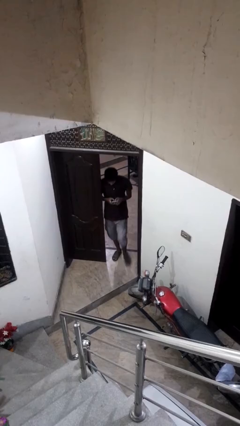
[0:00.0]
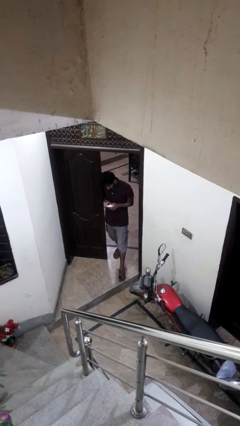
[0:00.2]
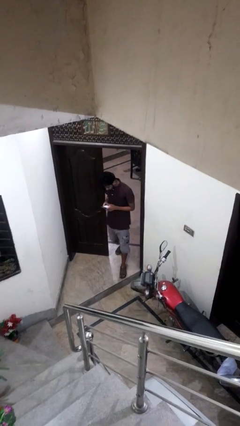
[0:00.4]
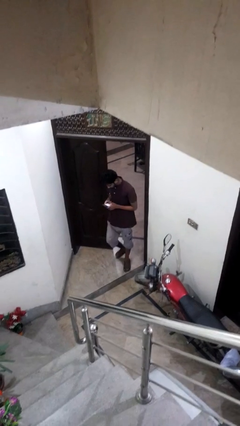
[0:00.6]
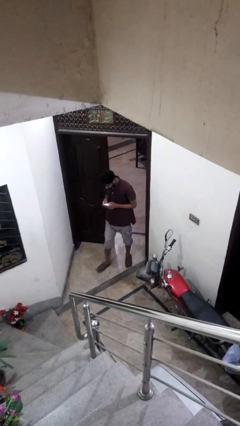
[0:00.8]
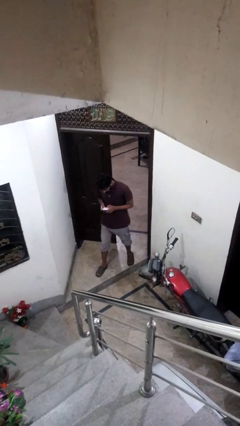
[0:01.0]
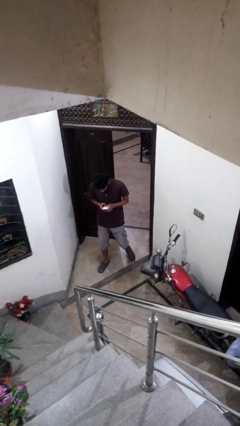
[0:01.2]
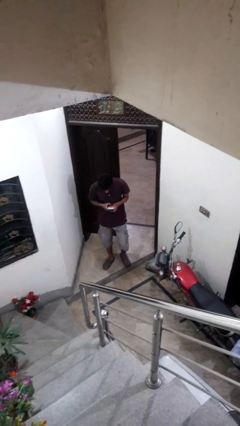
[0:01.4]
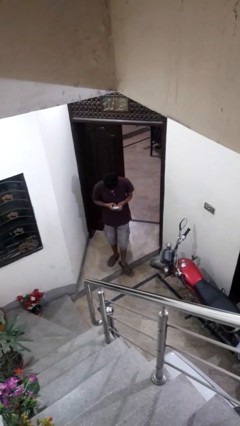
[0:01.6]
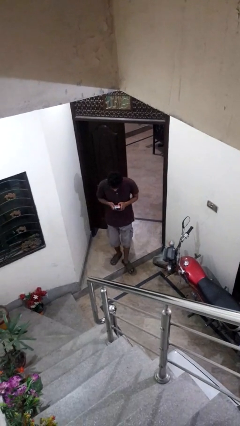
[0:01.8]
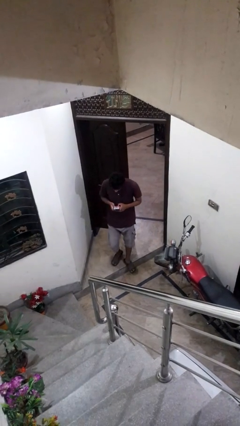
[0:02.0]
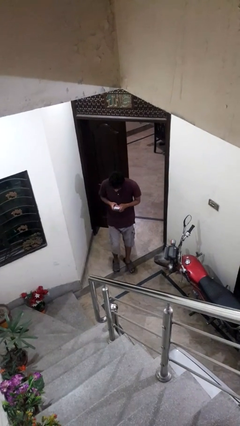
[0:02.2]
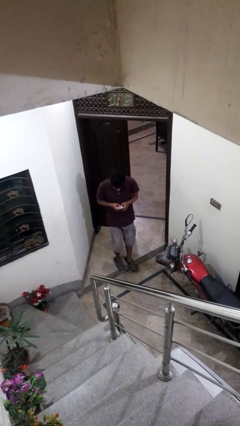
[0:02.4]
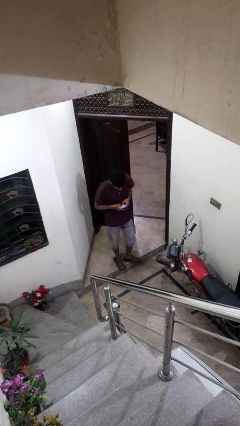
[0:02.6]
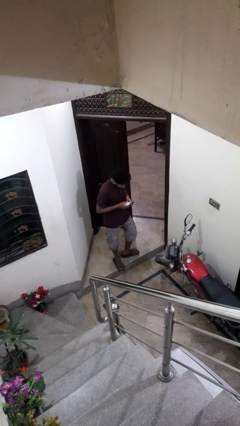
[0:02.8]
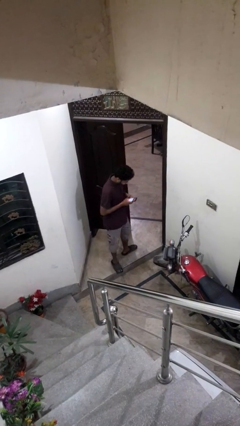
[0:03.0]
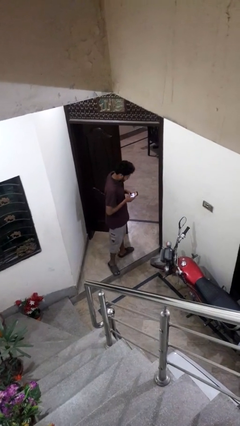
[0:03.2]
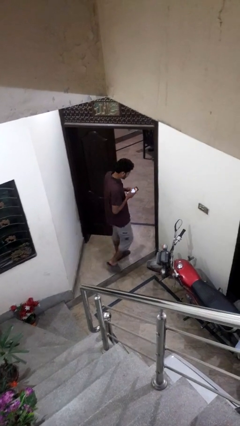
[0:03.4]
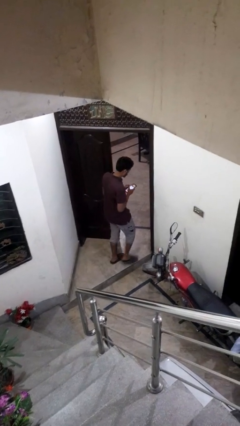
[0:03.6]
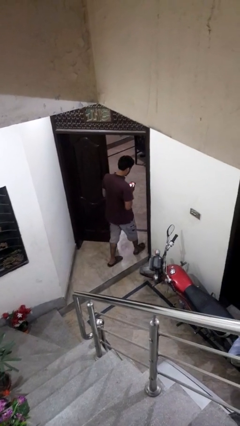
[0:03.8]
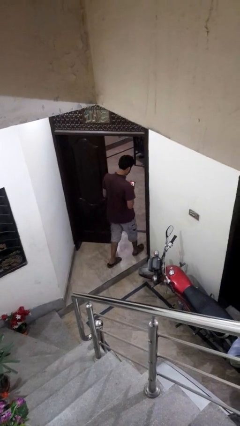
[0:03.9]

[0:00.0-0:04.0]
person enters scene through structure

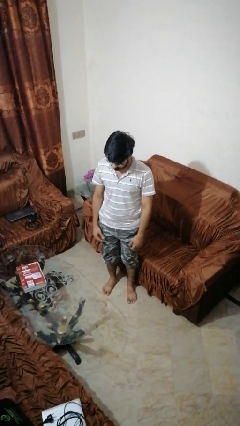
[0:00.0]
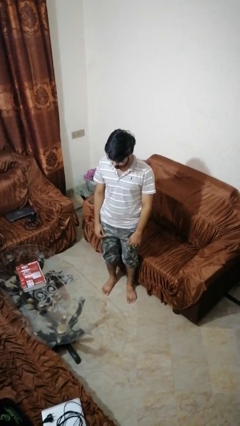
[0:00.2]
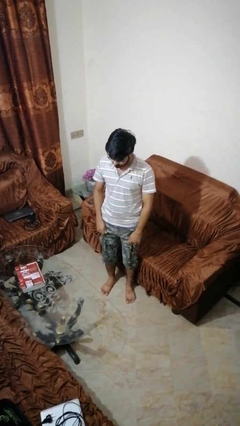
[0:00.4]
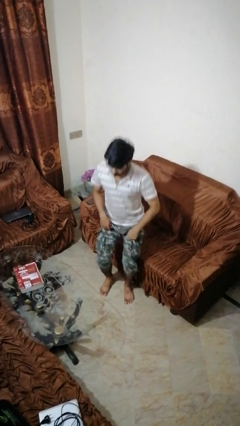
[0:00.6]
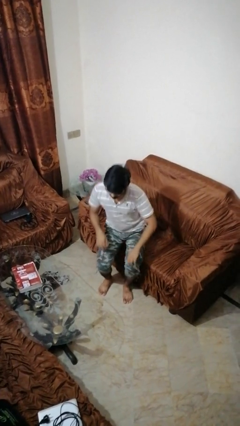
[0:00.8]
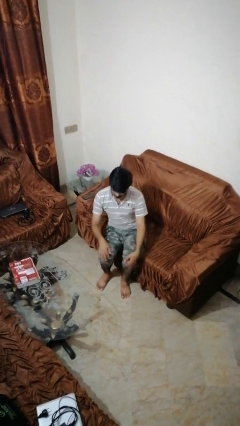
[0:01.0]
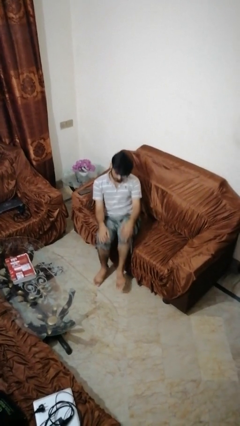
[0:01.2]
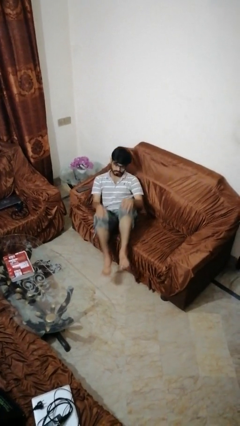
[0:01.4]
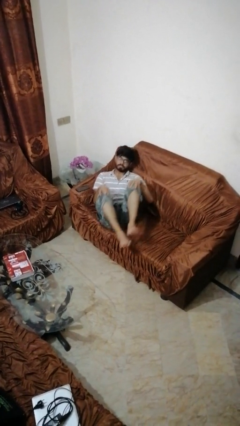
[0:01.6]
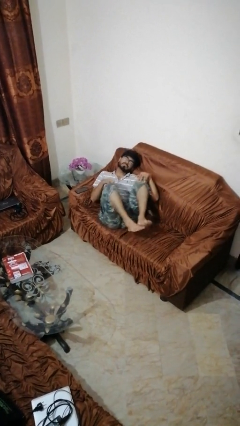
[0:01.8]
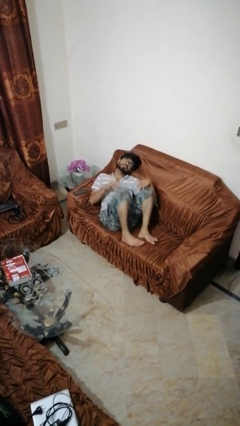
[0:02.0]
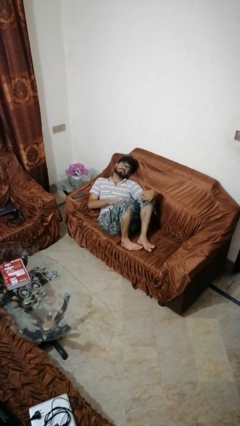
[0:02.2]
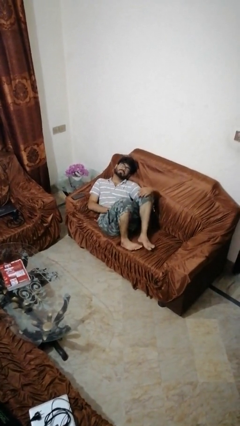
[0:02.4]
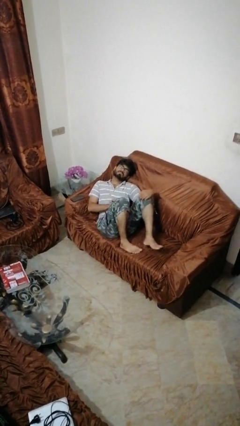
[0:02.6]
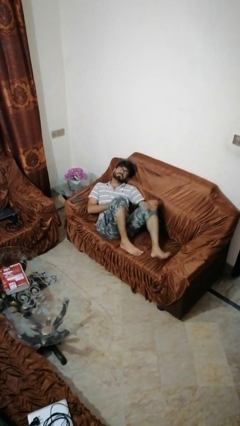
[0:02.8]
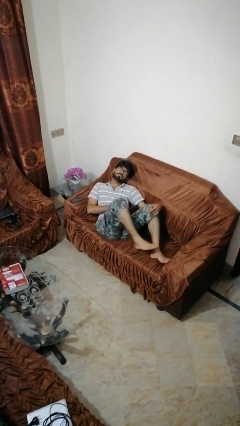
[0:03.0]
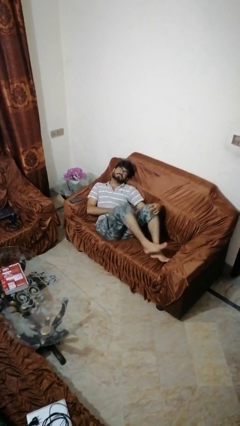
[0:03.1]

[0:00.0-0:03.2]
person lies down on couch

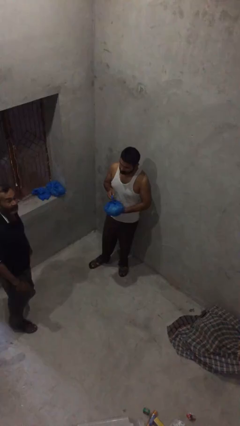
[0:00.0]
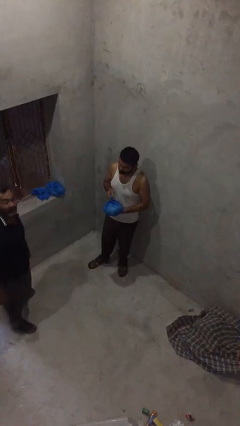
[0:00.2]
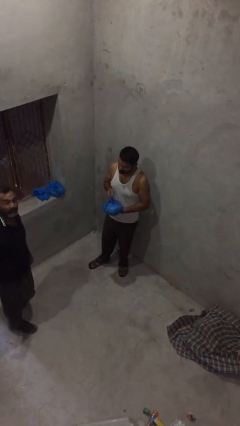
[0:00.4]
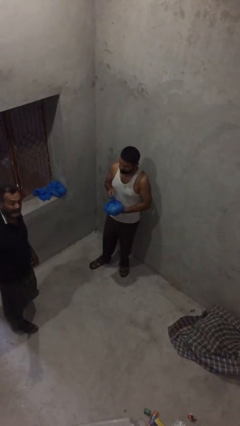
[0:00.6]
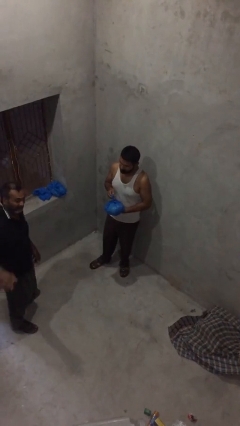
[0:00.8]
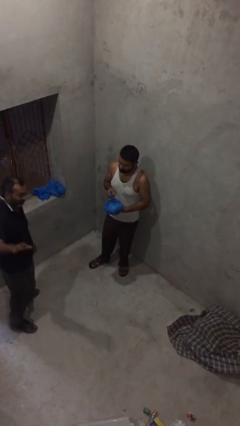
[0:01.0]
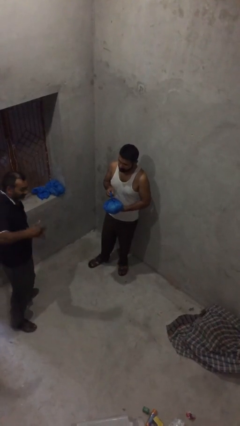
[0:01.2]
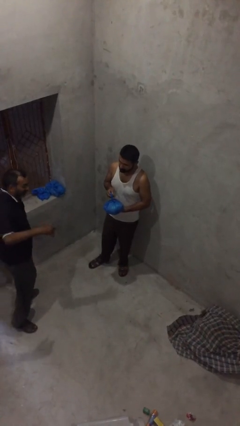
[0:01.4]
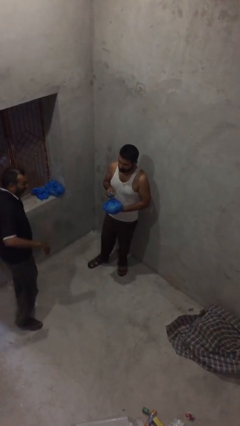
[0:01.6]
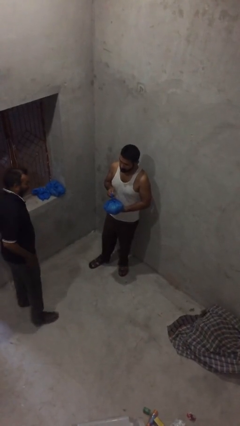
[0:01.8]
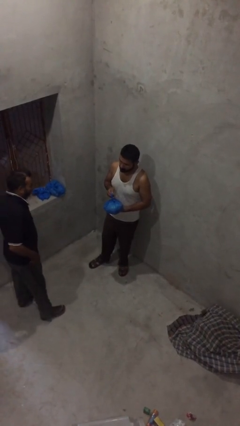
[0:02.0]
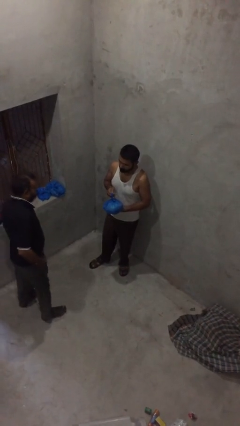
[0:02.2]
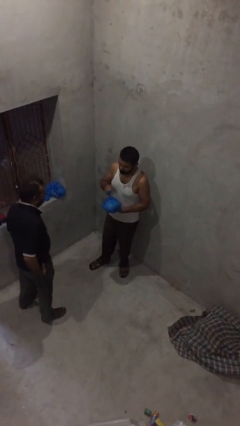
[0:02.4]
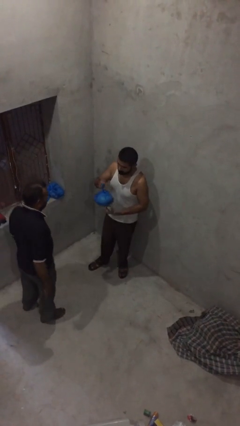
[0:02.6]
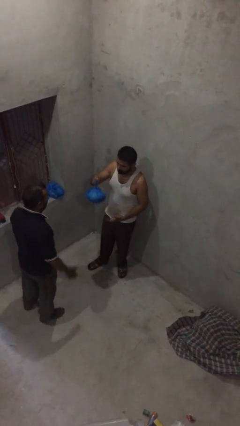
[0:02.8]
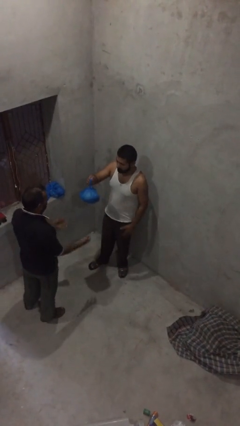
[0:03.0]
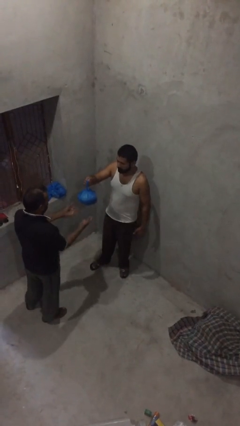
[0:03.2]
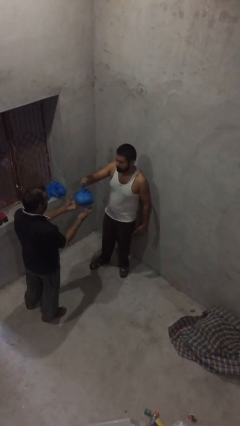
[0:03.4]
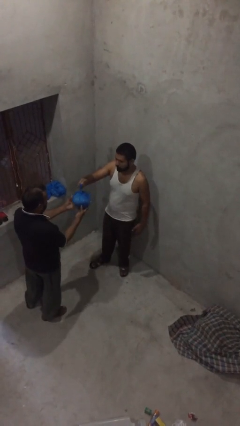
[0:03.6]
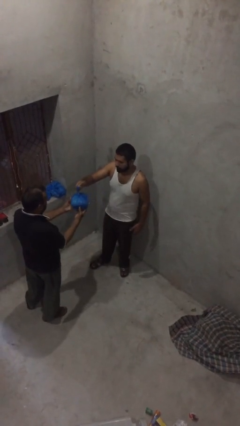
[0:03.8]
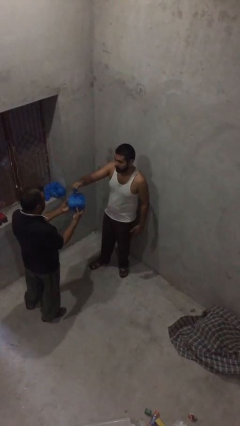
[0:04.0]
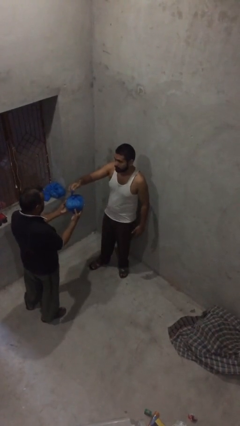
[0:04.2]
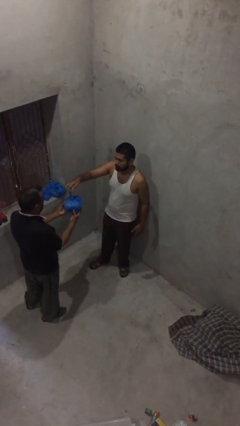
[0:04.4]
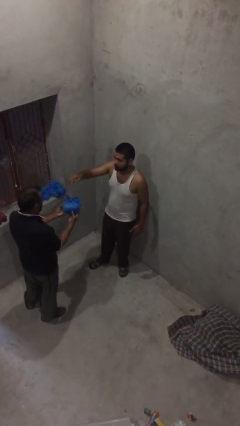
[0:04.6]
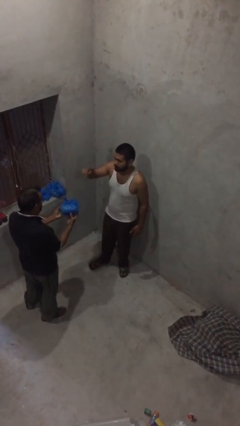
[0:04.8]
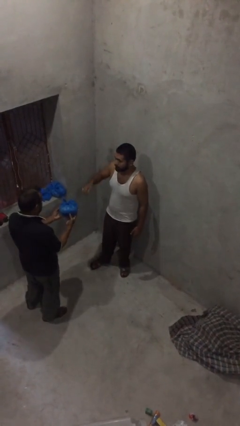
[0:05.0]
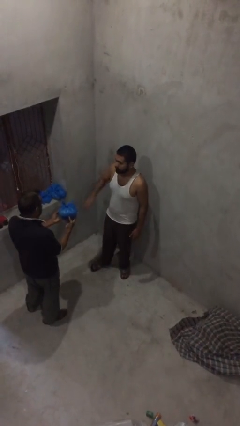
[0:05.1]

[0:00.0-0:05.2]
person transfers object to person

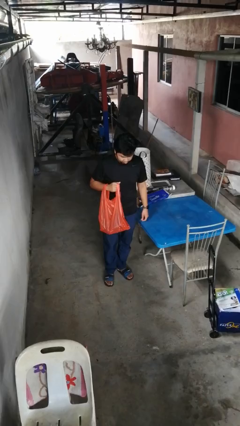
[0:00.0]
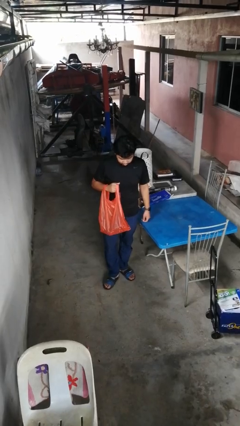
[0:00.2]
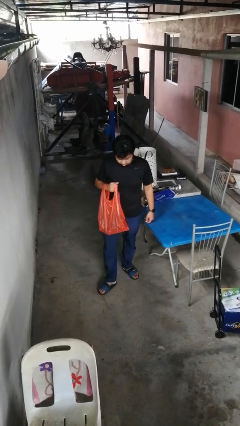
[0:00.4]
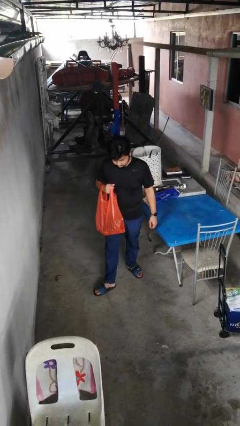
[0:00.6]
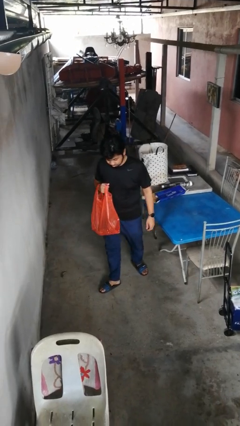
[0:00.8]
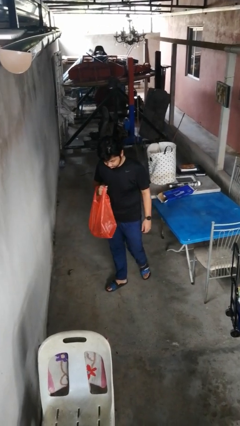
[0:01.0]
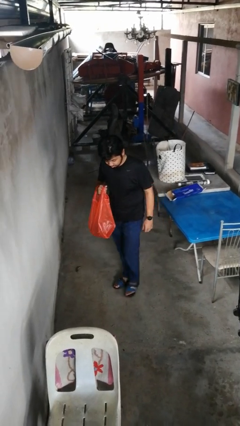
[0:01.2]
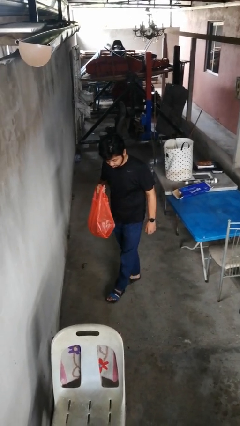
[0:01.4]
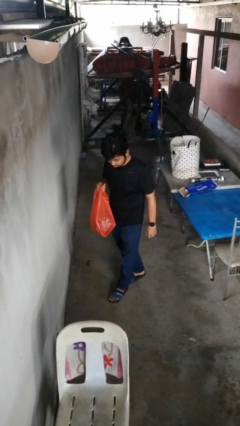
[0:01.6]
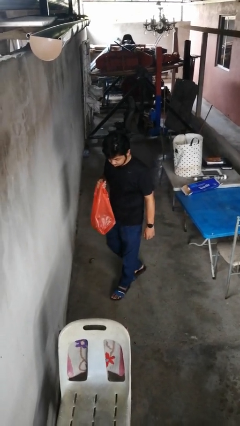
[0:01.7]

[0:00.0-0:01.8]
person carries groceries

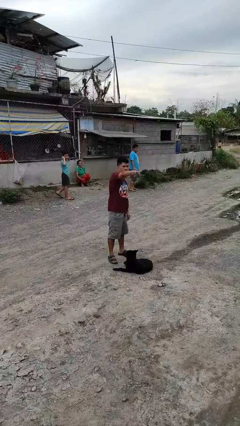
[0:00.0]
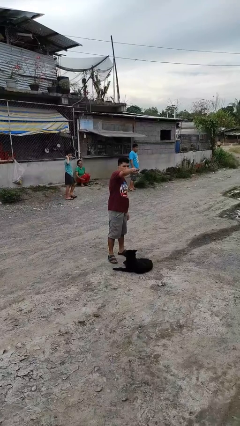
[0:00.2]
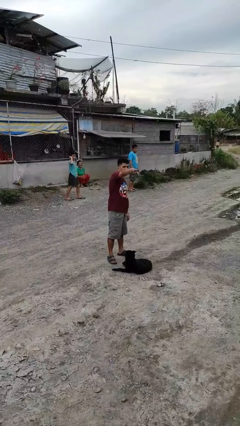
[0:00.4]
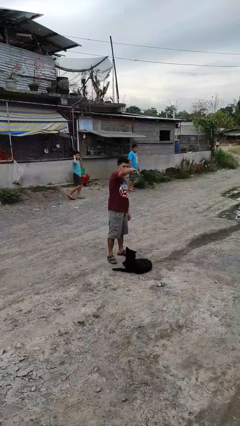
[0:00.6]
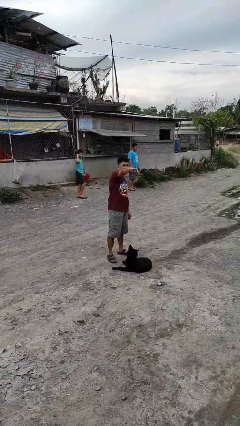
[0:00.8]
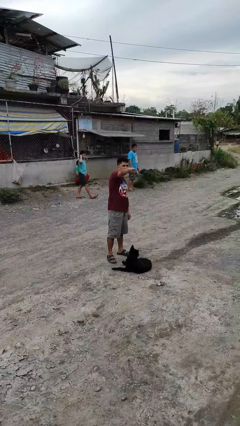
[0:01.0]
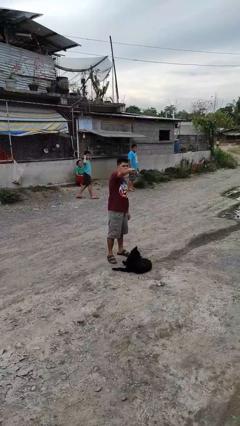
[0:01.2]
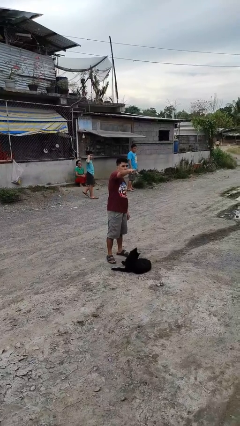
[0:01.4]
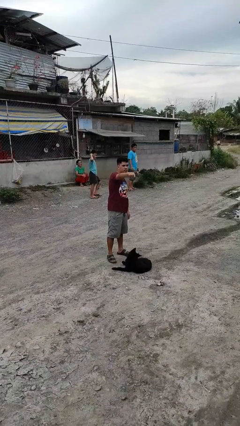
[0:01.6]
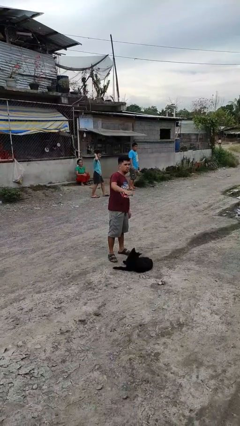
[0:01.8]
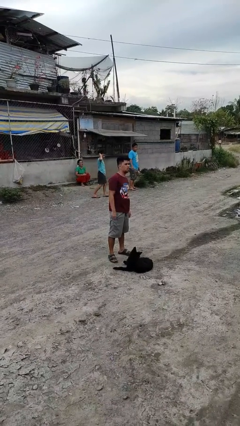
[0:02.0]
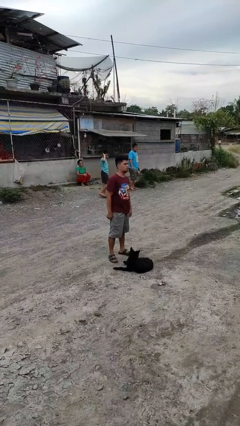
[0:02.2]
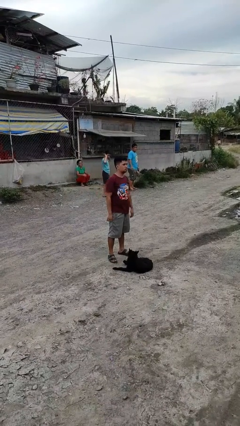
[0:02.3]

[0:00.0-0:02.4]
person points at person

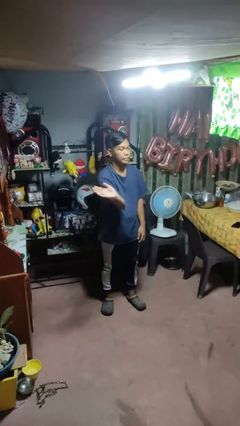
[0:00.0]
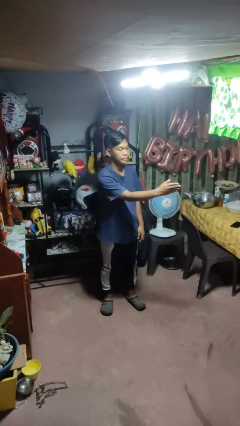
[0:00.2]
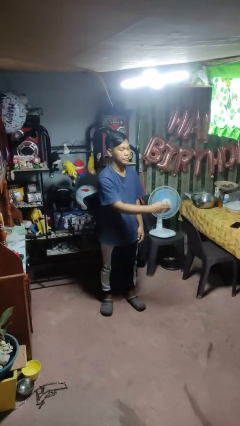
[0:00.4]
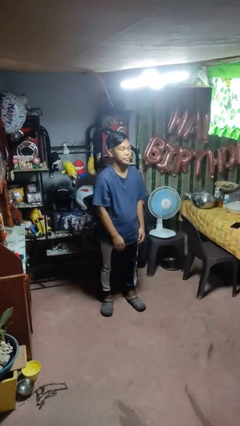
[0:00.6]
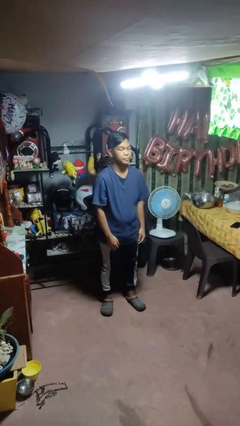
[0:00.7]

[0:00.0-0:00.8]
person gestures swipe left
